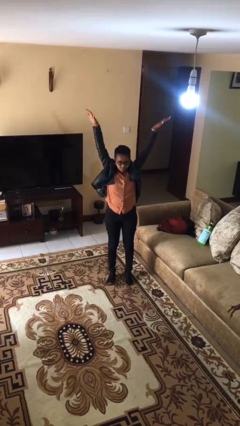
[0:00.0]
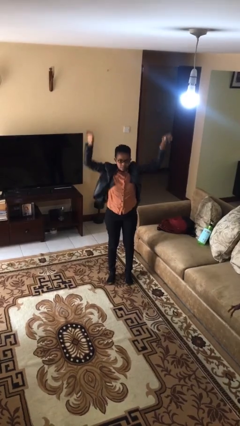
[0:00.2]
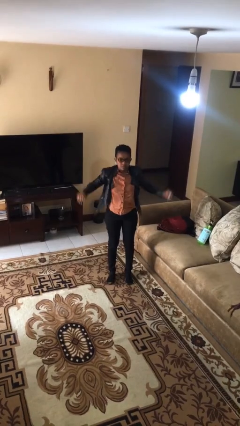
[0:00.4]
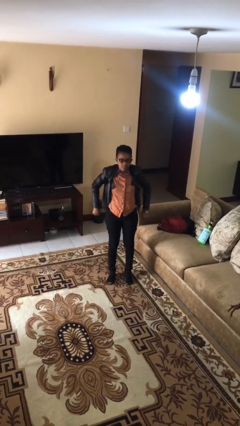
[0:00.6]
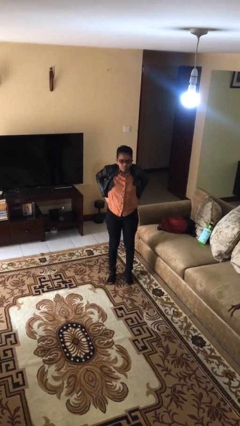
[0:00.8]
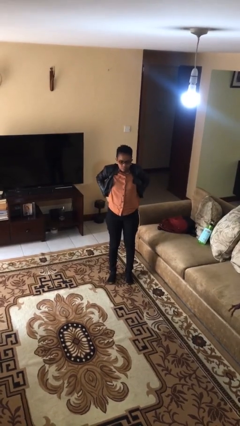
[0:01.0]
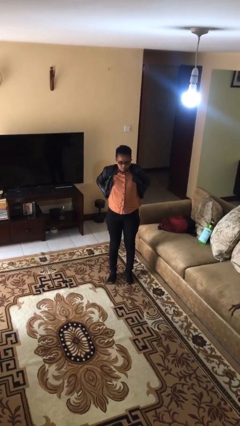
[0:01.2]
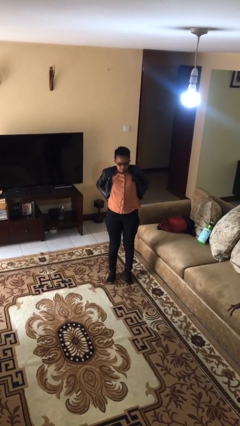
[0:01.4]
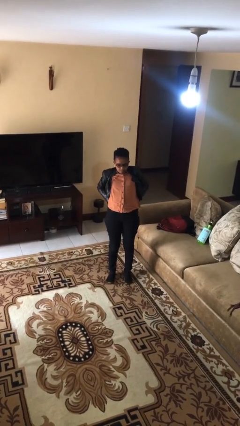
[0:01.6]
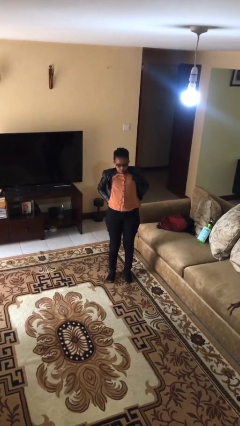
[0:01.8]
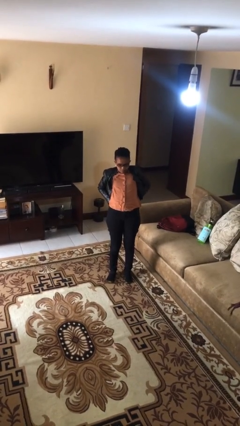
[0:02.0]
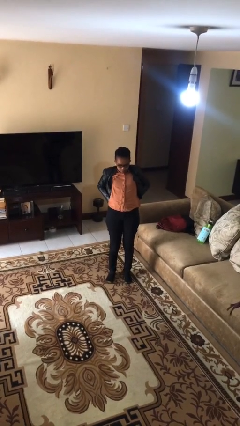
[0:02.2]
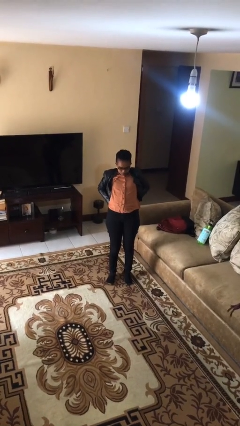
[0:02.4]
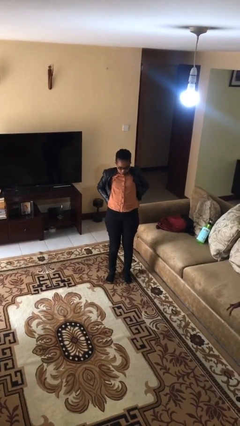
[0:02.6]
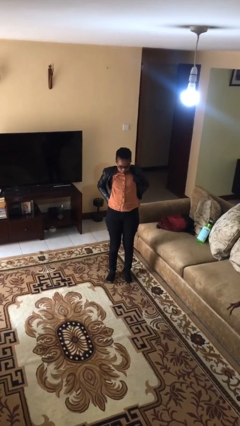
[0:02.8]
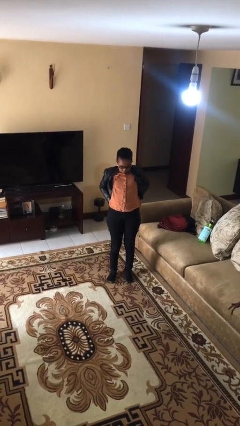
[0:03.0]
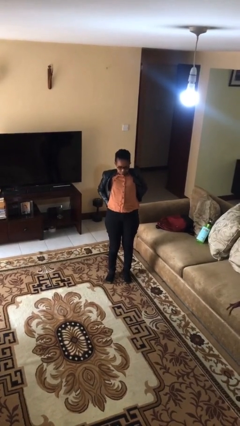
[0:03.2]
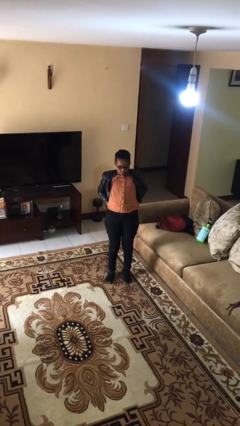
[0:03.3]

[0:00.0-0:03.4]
person stretches back

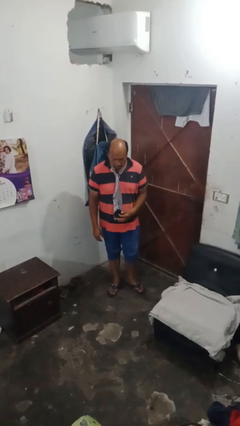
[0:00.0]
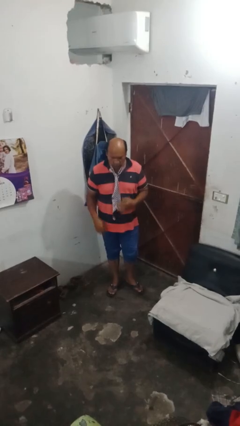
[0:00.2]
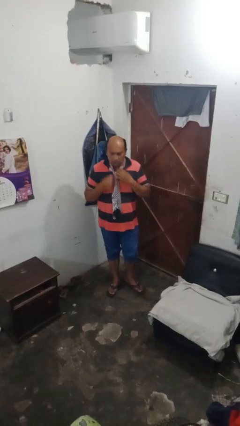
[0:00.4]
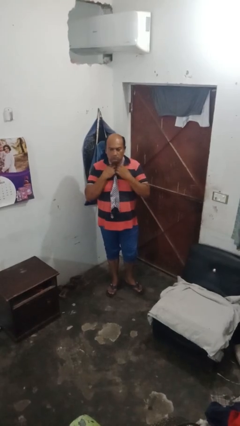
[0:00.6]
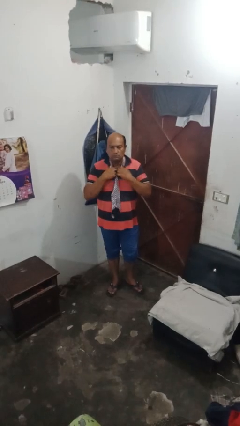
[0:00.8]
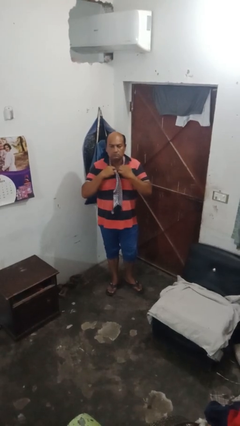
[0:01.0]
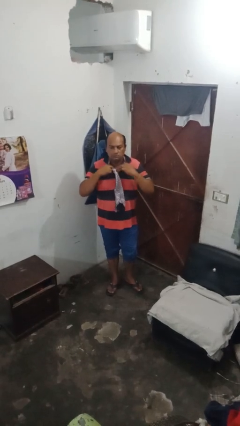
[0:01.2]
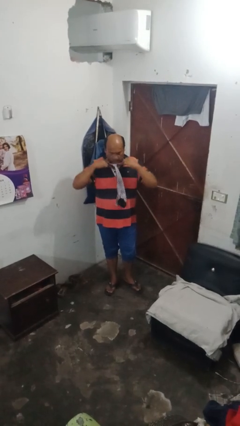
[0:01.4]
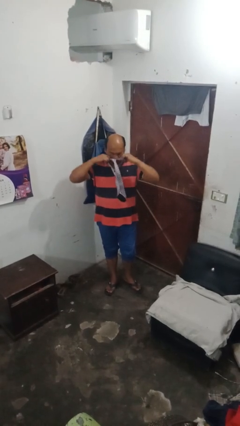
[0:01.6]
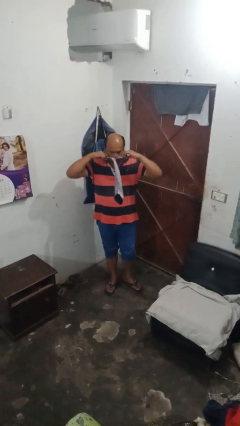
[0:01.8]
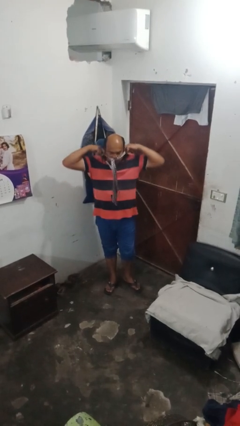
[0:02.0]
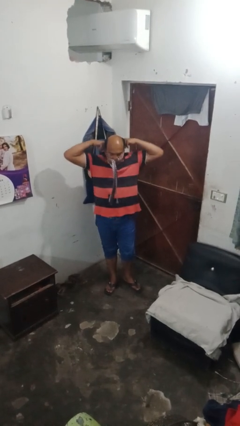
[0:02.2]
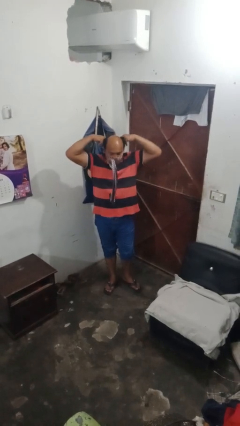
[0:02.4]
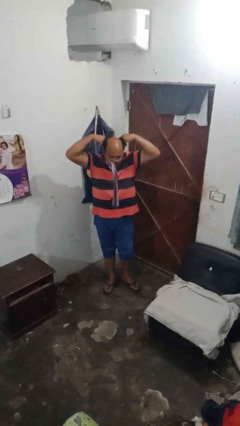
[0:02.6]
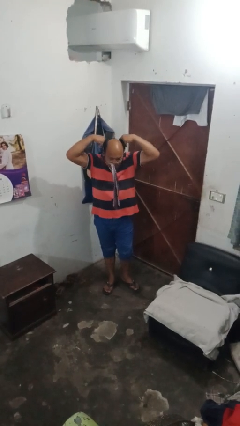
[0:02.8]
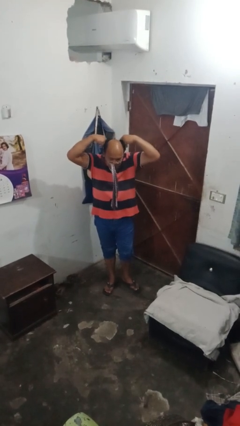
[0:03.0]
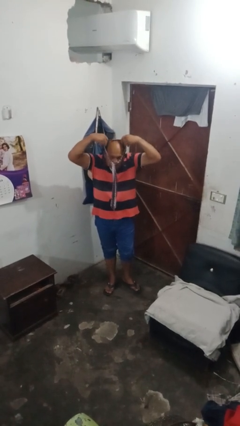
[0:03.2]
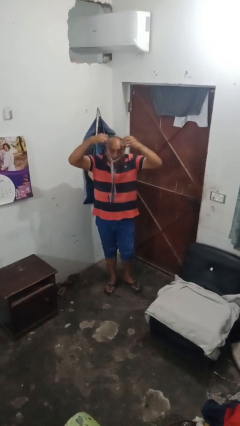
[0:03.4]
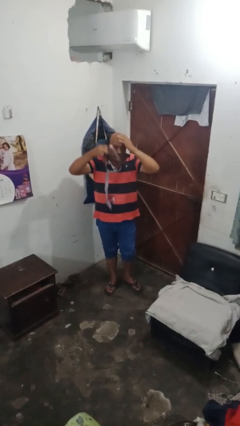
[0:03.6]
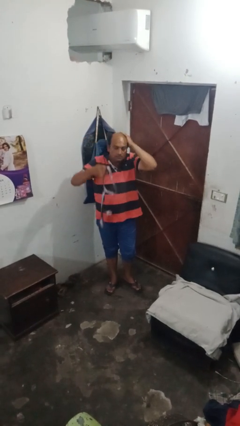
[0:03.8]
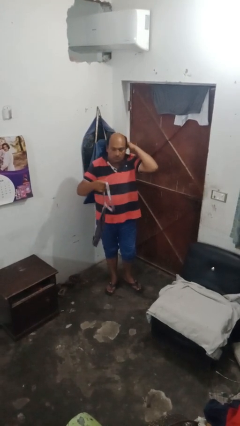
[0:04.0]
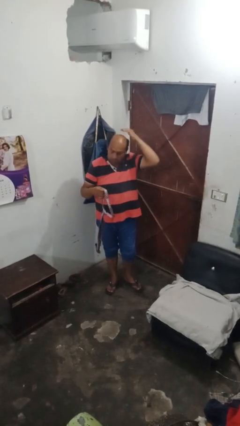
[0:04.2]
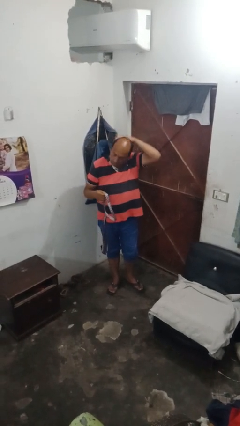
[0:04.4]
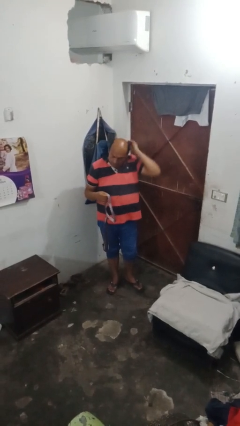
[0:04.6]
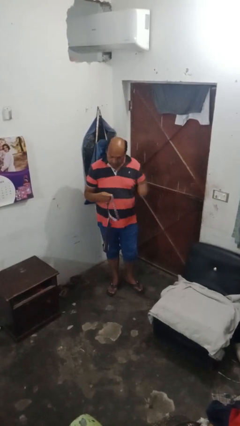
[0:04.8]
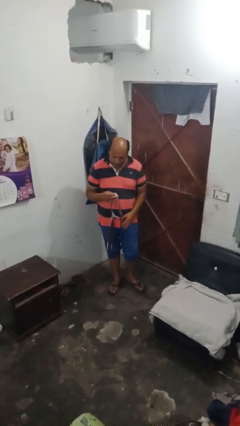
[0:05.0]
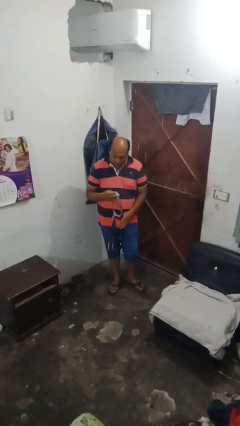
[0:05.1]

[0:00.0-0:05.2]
person takes off necktie

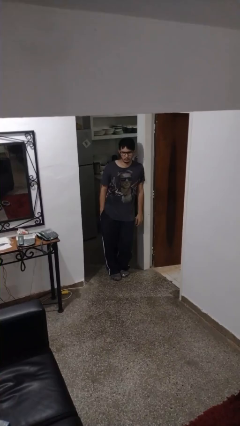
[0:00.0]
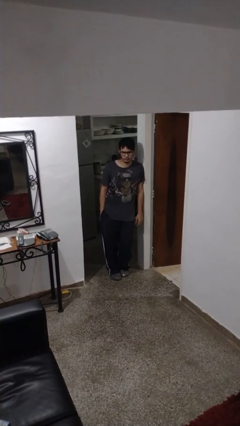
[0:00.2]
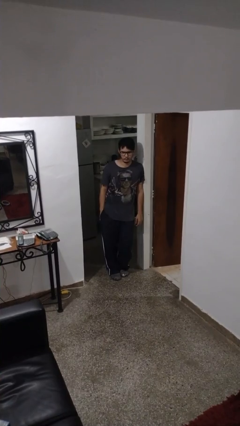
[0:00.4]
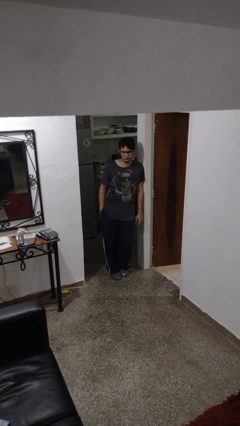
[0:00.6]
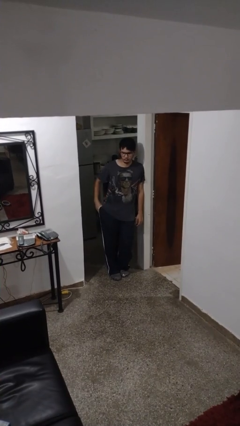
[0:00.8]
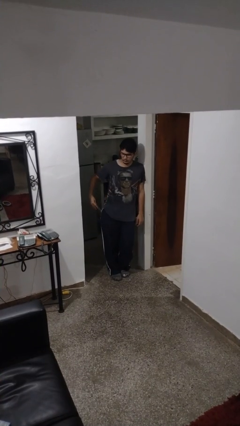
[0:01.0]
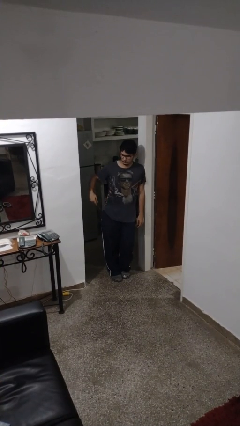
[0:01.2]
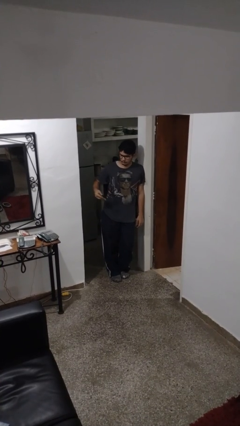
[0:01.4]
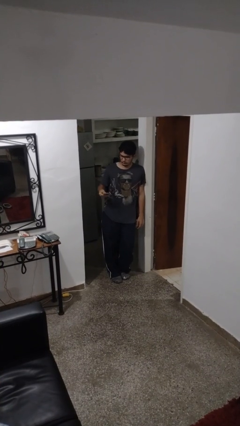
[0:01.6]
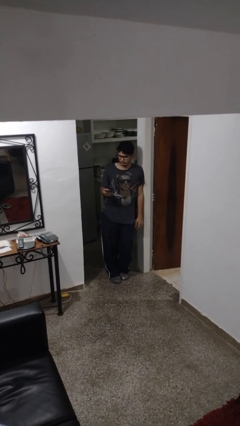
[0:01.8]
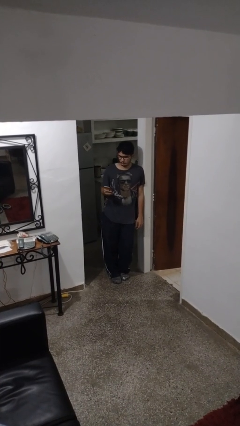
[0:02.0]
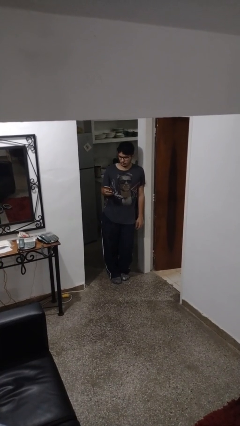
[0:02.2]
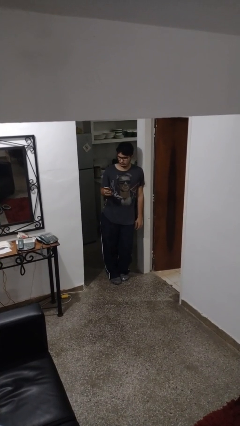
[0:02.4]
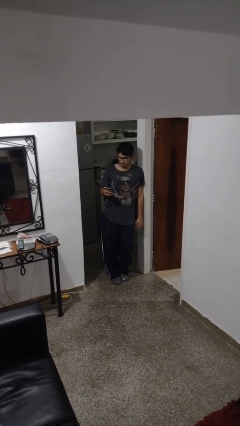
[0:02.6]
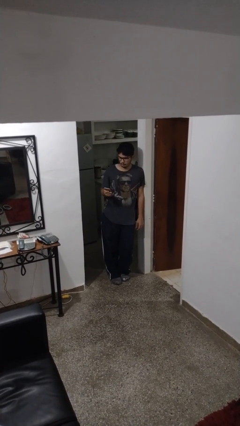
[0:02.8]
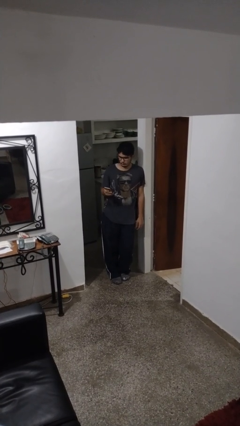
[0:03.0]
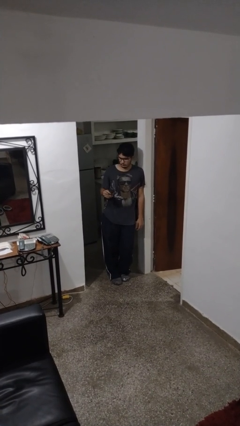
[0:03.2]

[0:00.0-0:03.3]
person takes phone from pocket

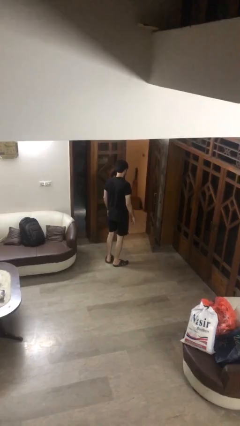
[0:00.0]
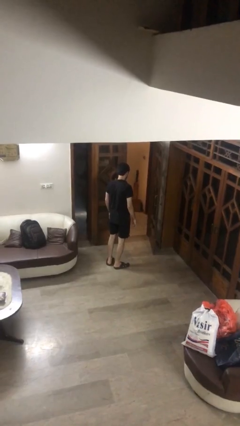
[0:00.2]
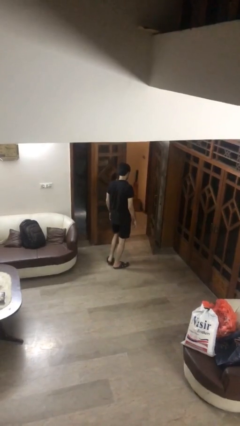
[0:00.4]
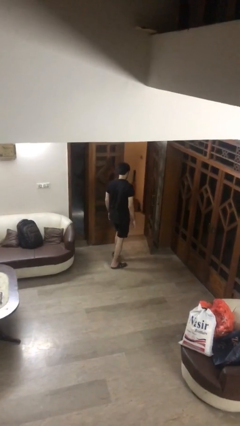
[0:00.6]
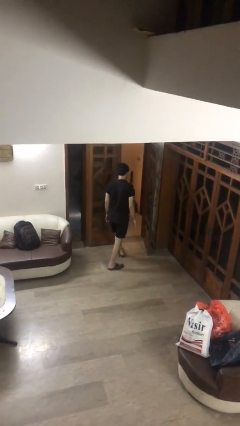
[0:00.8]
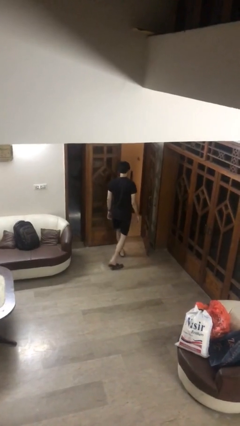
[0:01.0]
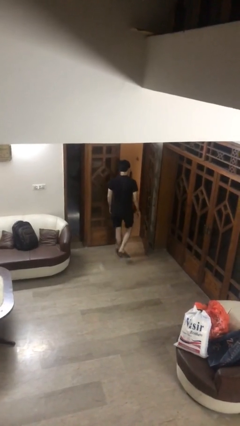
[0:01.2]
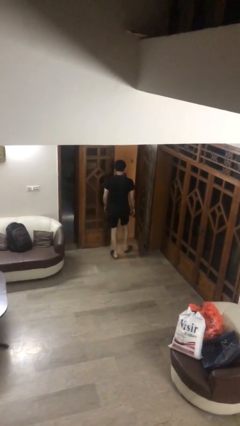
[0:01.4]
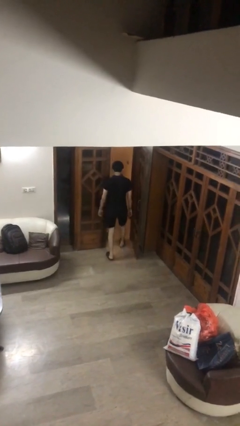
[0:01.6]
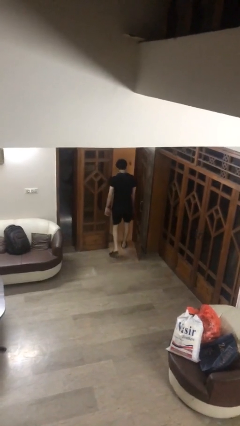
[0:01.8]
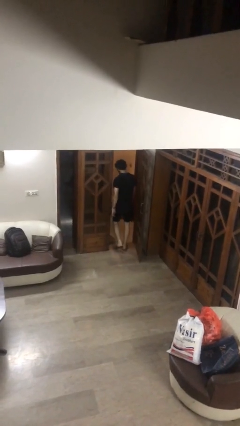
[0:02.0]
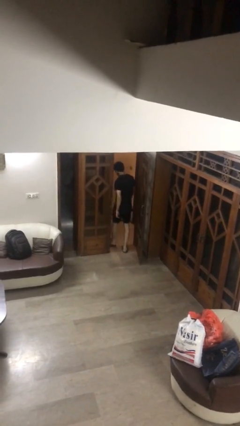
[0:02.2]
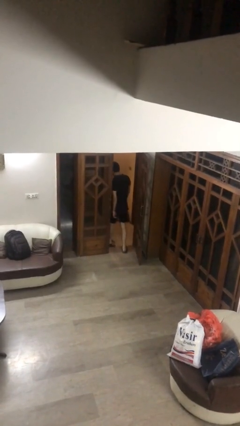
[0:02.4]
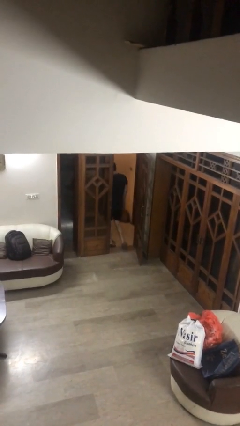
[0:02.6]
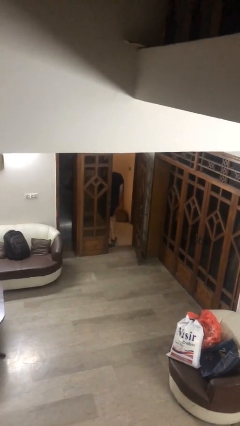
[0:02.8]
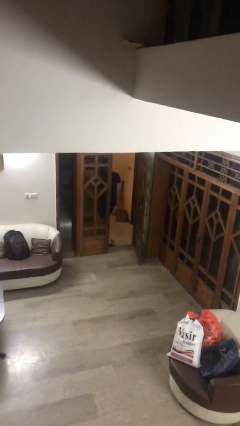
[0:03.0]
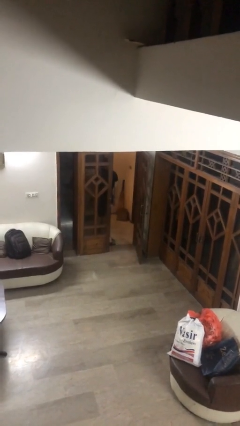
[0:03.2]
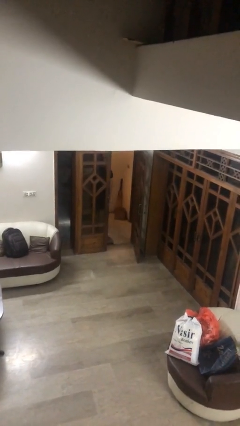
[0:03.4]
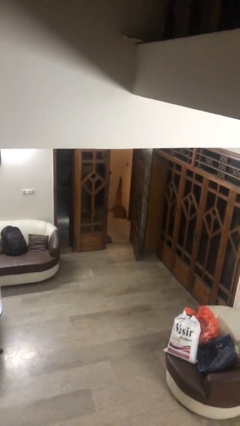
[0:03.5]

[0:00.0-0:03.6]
person exits scene through structure

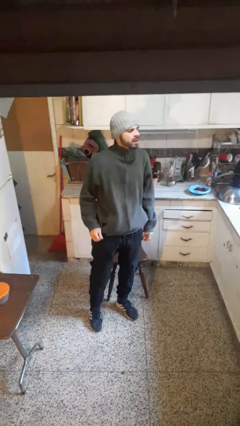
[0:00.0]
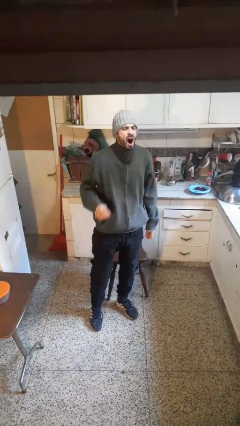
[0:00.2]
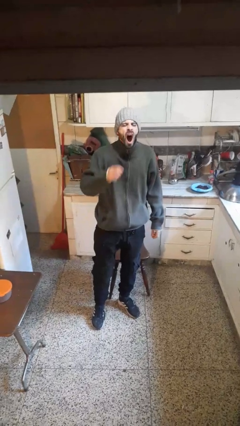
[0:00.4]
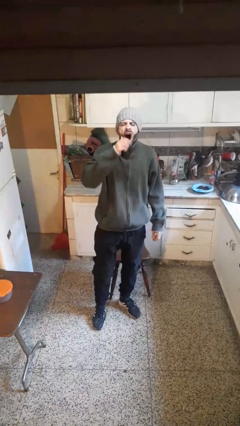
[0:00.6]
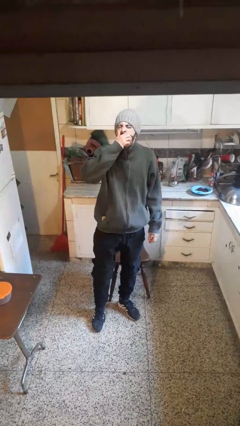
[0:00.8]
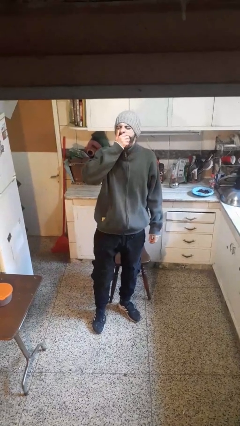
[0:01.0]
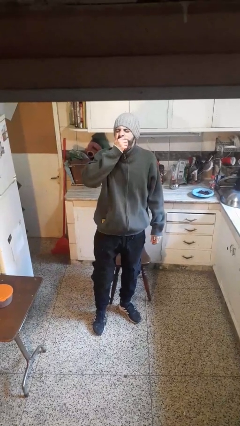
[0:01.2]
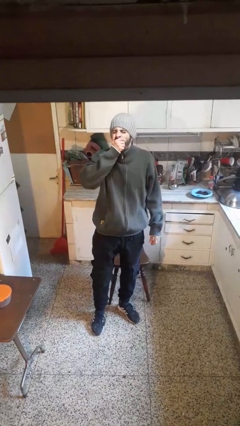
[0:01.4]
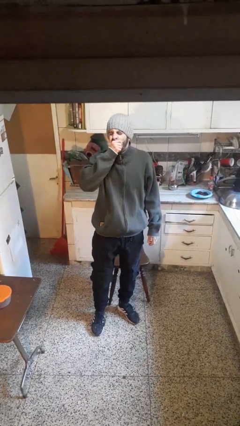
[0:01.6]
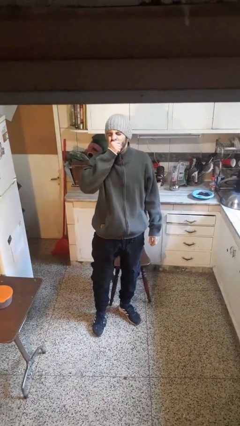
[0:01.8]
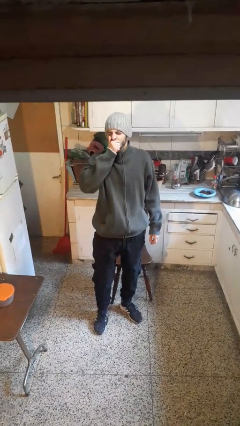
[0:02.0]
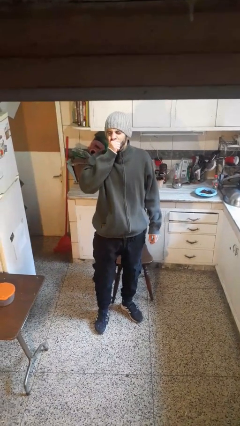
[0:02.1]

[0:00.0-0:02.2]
person yawns

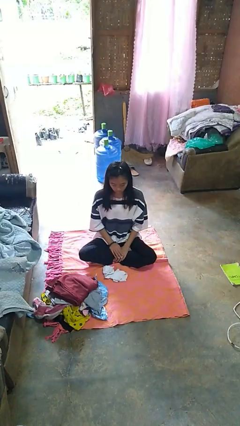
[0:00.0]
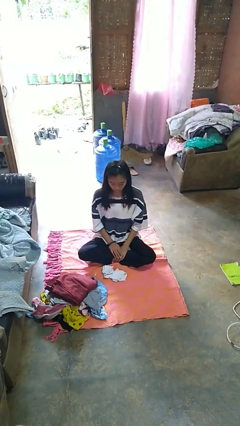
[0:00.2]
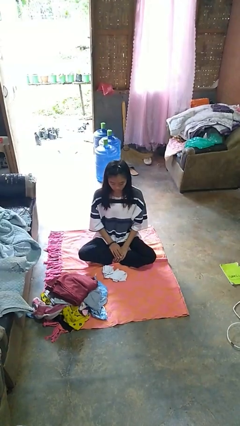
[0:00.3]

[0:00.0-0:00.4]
person folds socks
